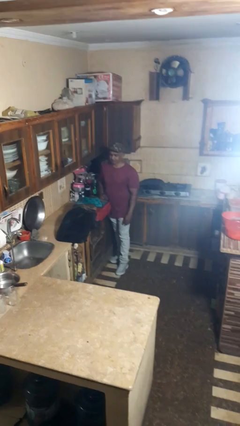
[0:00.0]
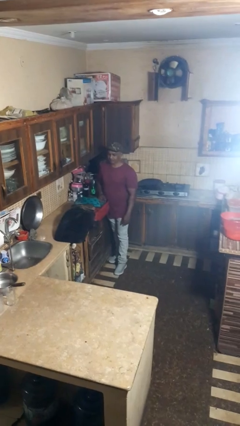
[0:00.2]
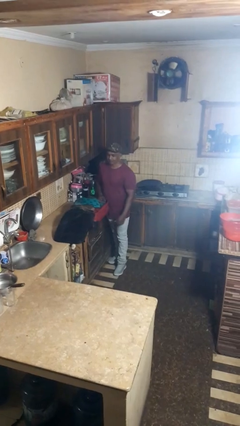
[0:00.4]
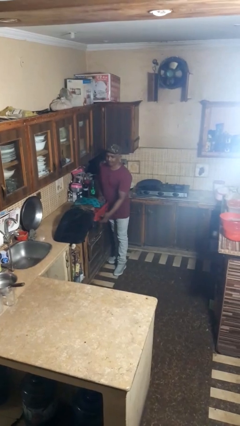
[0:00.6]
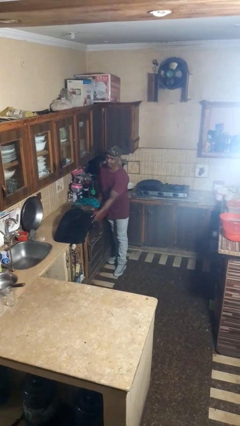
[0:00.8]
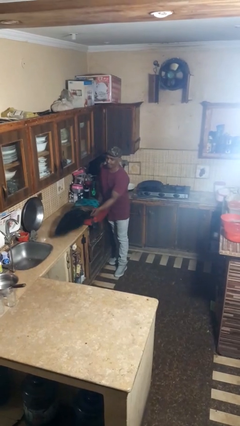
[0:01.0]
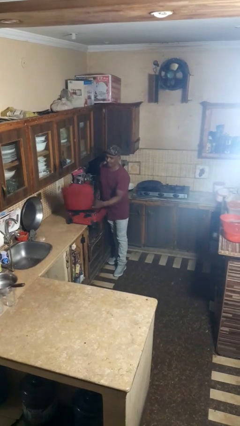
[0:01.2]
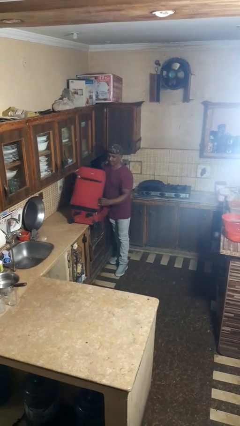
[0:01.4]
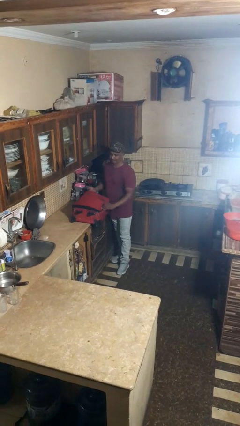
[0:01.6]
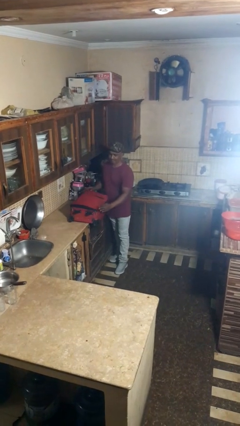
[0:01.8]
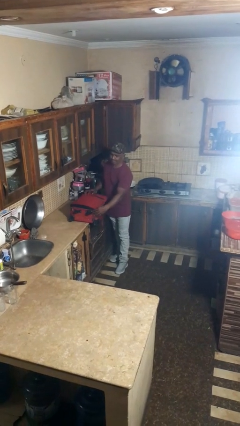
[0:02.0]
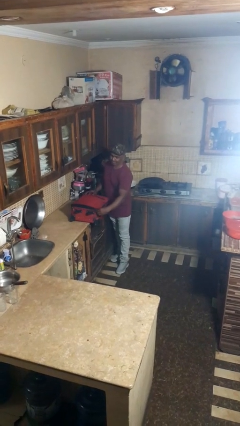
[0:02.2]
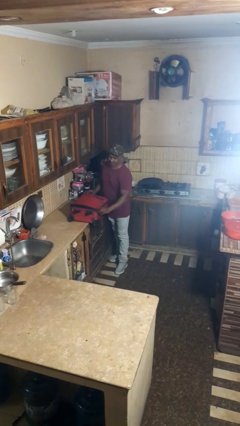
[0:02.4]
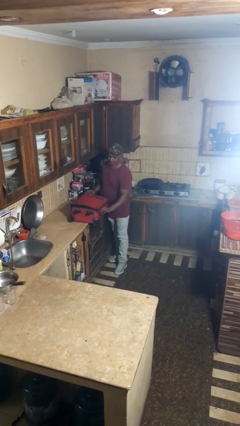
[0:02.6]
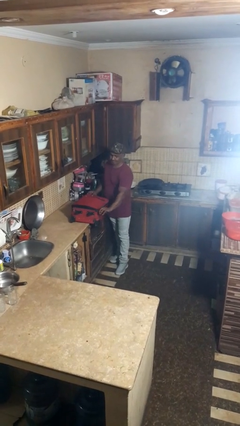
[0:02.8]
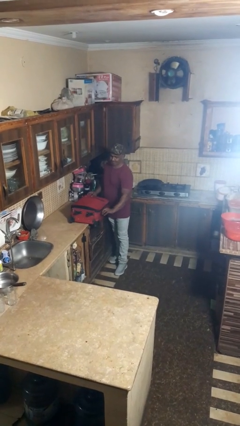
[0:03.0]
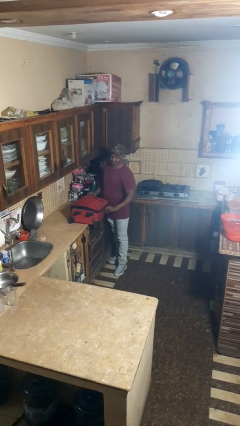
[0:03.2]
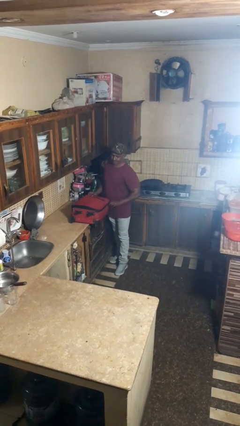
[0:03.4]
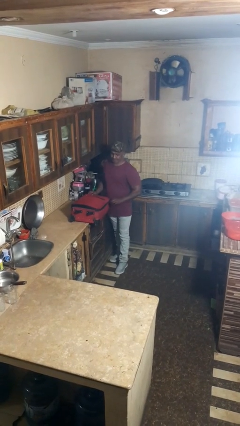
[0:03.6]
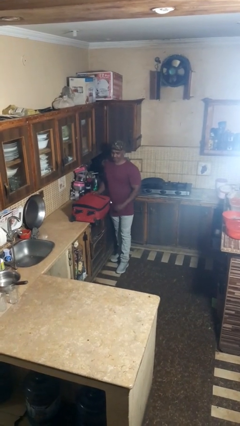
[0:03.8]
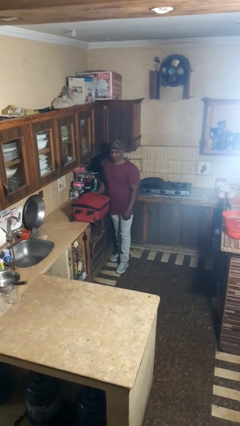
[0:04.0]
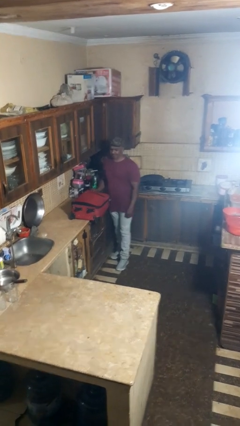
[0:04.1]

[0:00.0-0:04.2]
person closes suitcase

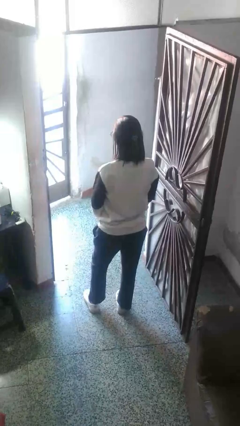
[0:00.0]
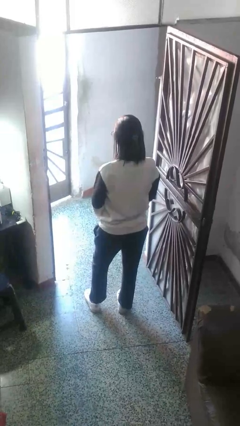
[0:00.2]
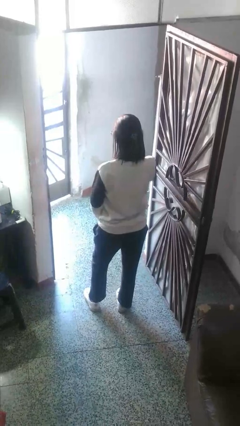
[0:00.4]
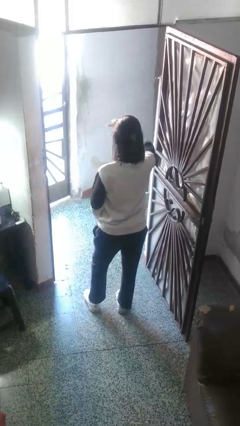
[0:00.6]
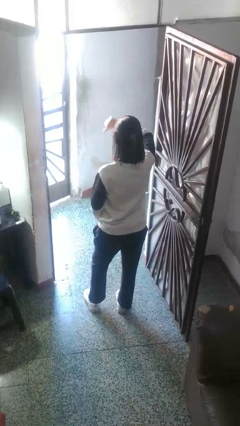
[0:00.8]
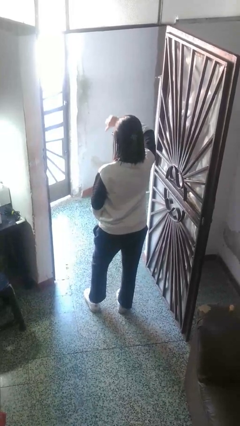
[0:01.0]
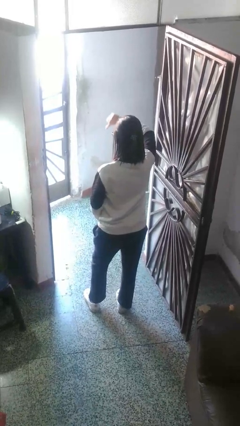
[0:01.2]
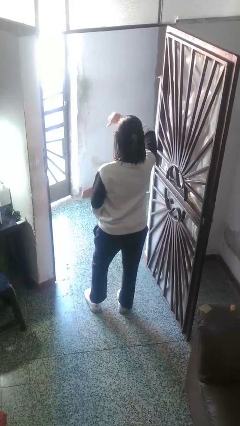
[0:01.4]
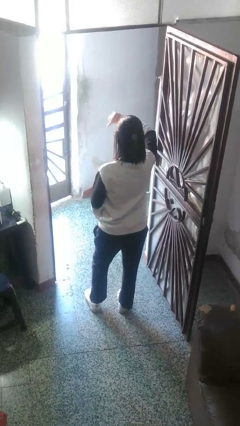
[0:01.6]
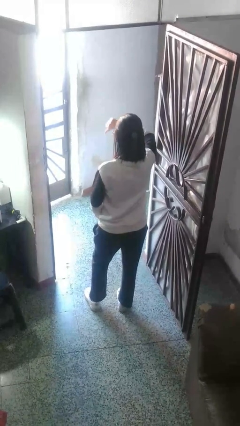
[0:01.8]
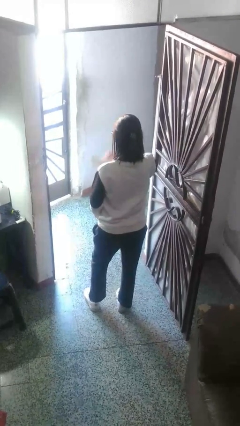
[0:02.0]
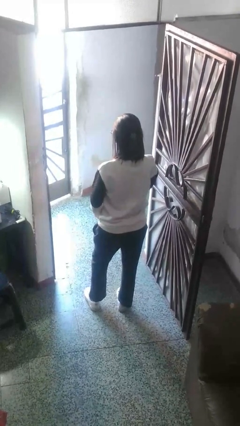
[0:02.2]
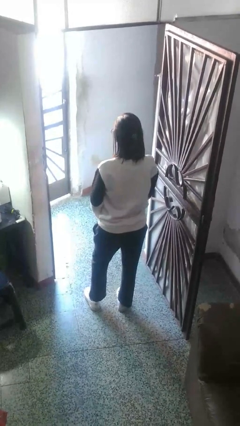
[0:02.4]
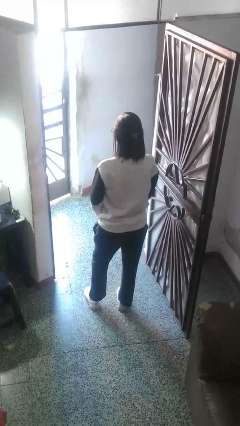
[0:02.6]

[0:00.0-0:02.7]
person gestures thumbs down

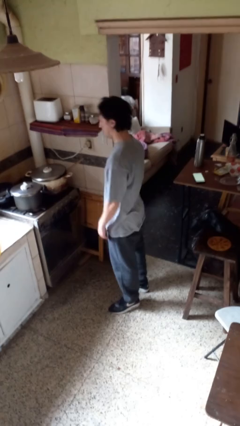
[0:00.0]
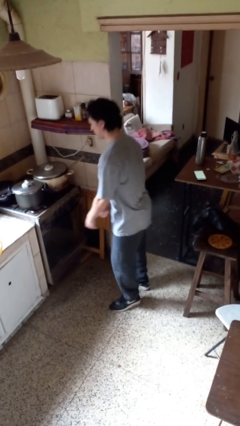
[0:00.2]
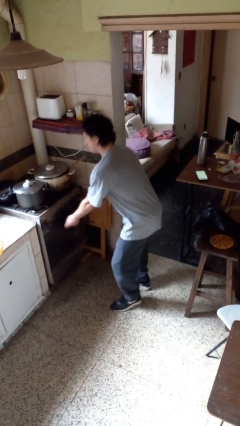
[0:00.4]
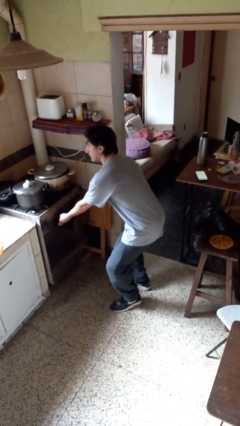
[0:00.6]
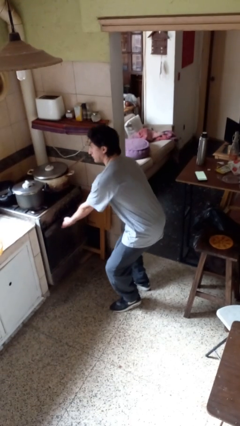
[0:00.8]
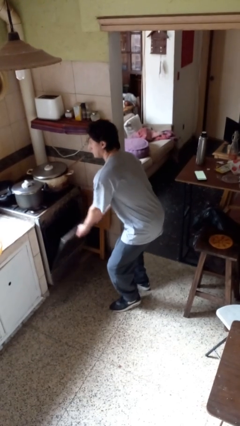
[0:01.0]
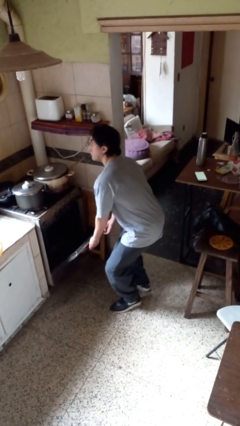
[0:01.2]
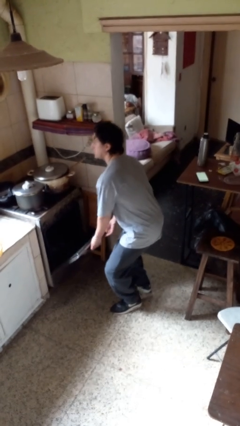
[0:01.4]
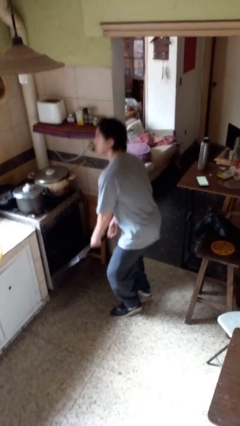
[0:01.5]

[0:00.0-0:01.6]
person opens oven door

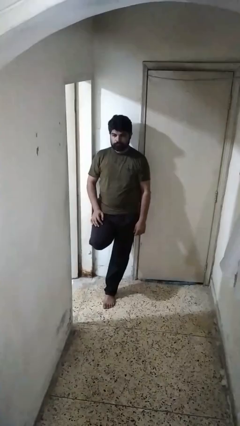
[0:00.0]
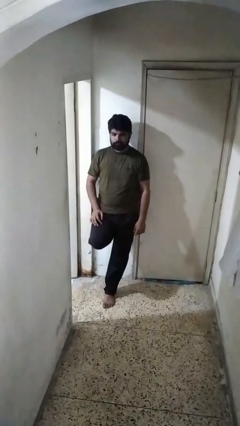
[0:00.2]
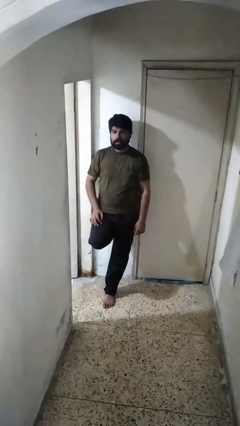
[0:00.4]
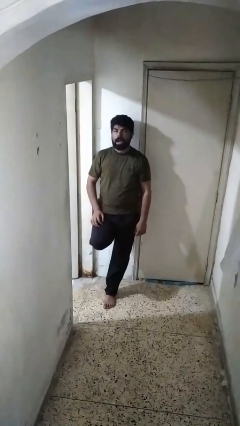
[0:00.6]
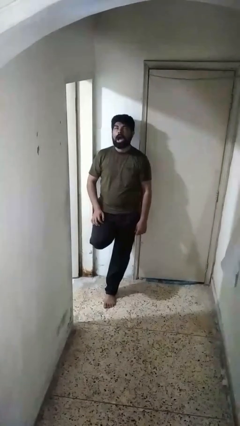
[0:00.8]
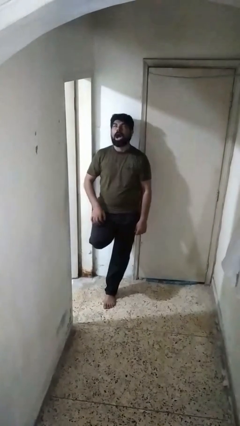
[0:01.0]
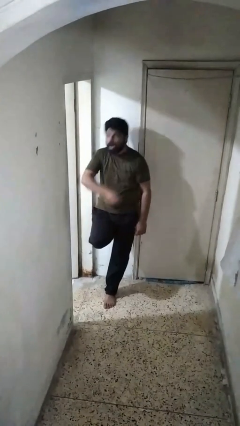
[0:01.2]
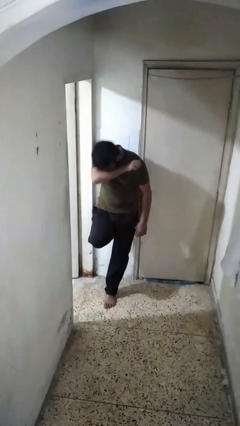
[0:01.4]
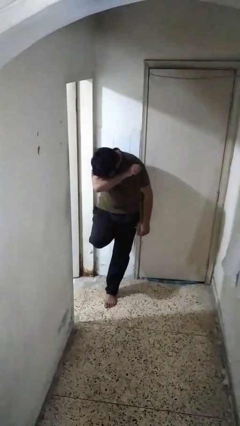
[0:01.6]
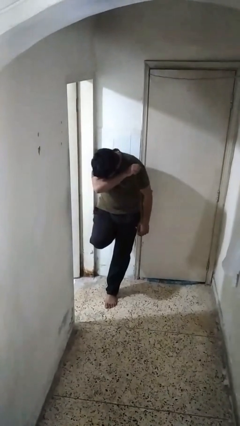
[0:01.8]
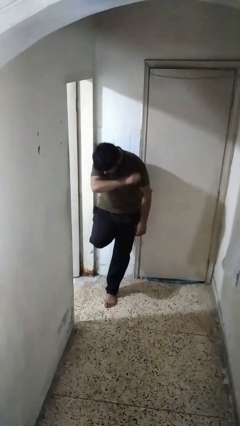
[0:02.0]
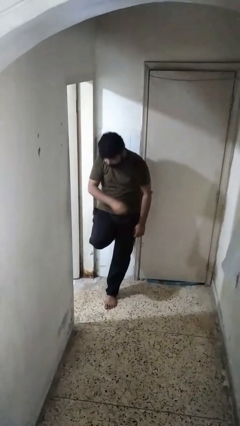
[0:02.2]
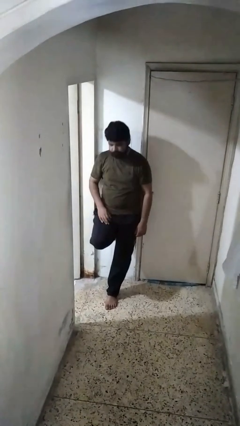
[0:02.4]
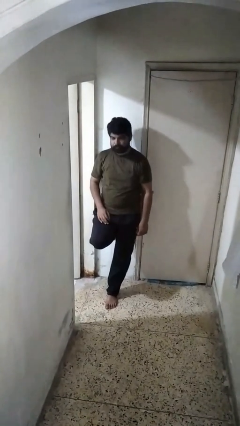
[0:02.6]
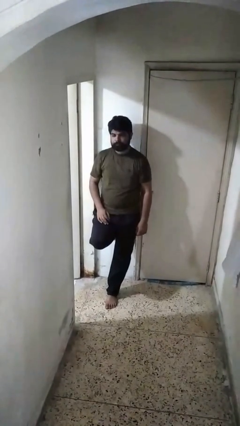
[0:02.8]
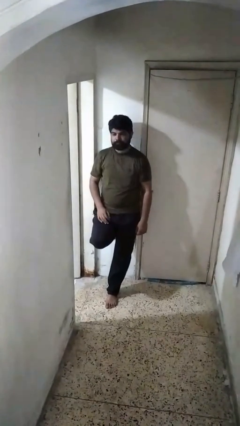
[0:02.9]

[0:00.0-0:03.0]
person sneezes into arm

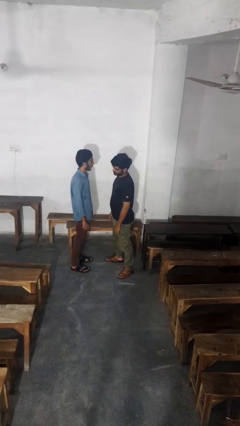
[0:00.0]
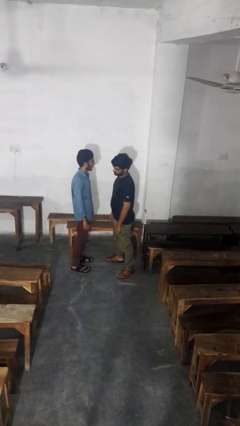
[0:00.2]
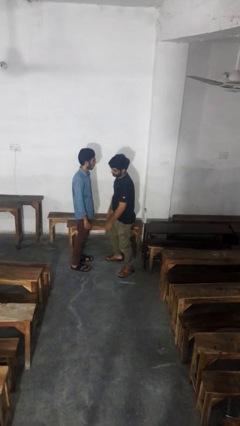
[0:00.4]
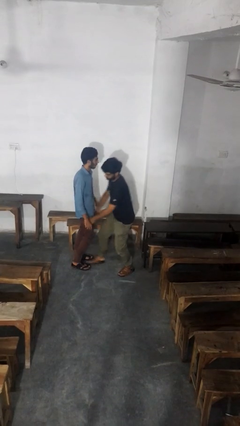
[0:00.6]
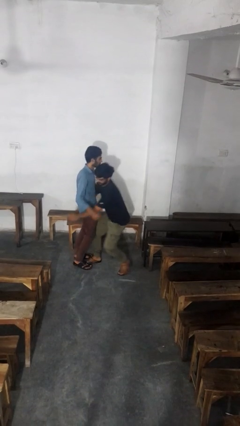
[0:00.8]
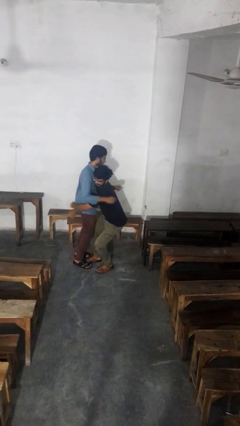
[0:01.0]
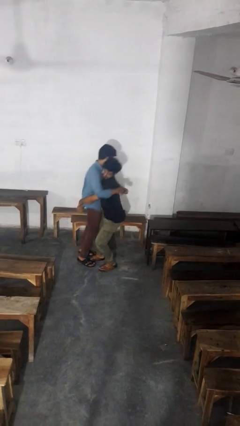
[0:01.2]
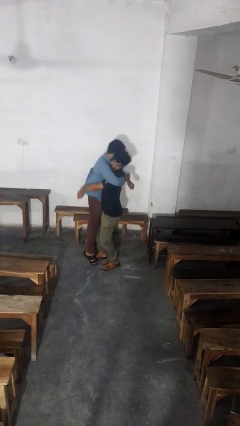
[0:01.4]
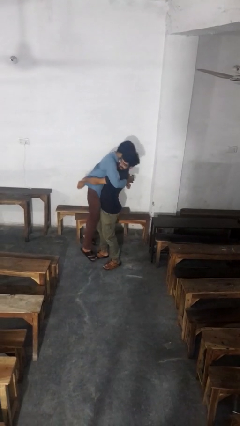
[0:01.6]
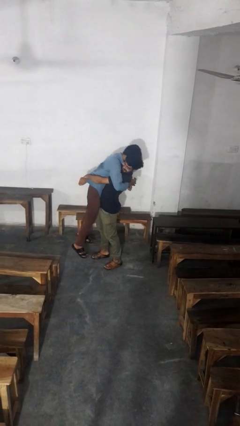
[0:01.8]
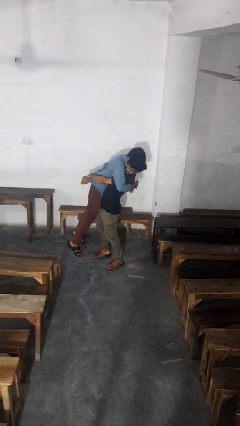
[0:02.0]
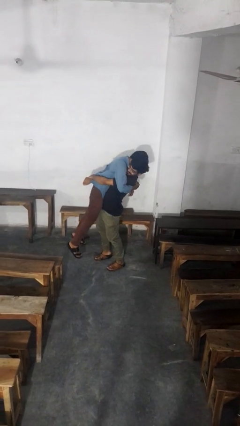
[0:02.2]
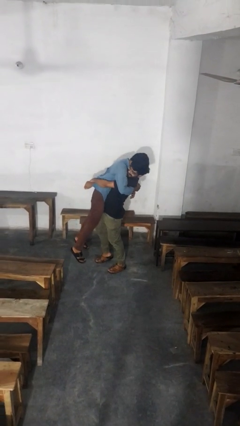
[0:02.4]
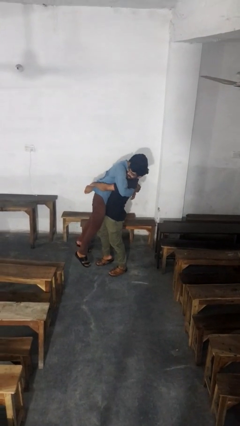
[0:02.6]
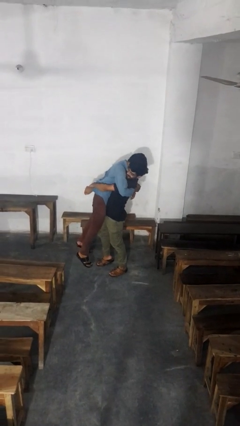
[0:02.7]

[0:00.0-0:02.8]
person picks up person

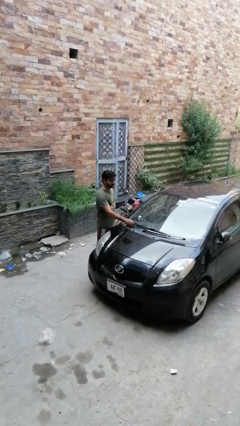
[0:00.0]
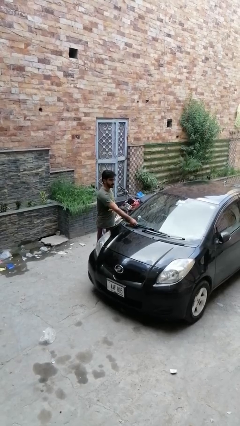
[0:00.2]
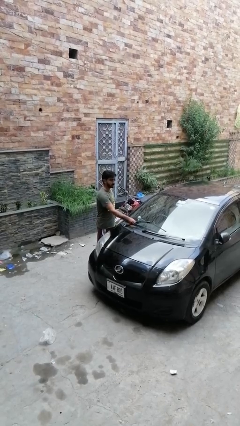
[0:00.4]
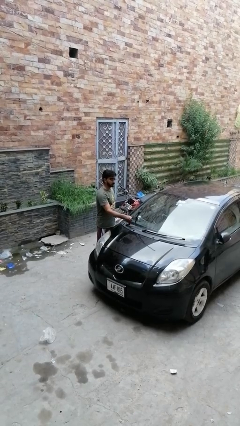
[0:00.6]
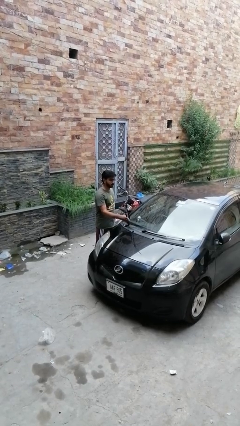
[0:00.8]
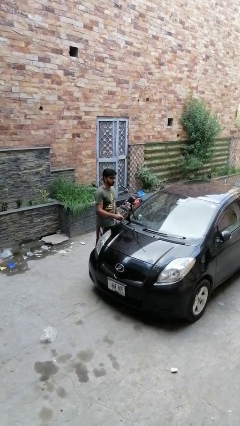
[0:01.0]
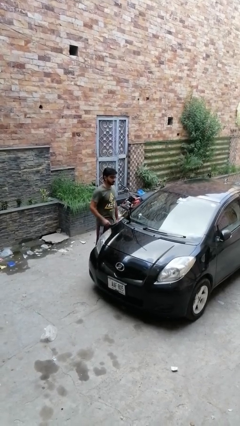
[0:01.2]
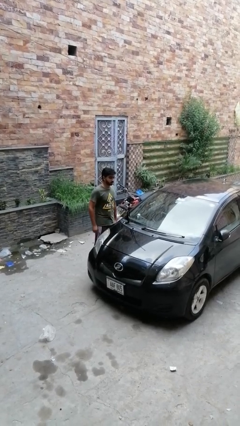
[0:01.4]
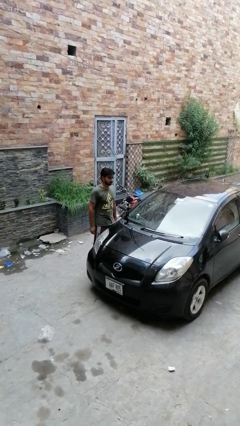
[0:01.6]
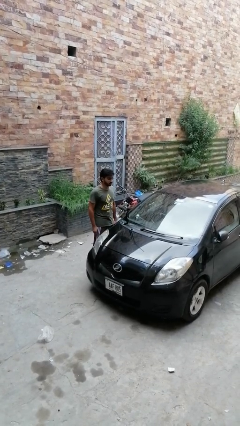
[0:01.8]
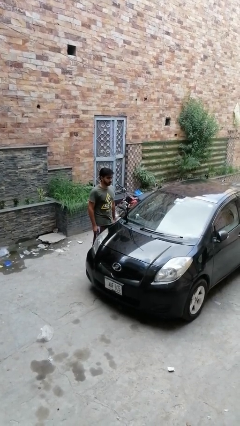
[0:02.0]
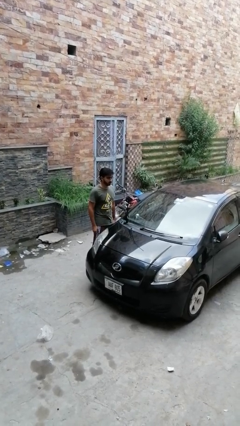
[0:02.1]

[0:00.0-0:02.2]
person flips up car wipers

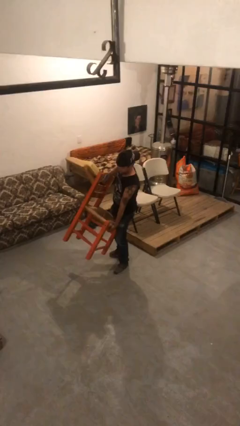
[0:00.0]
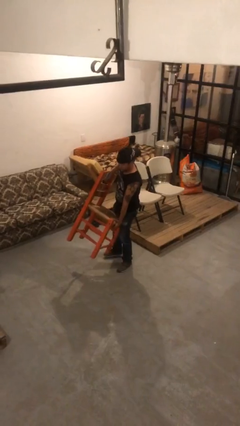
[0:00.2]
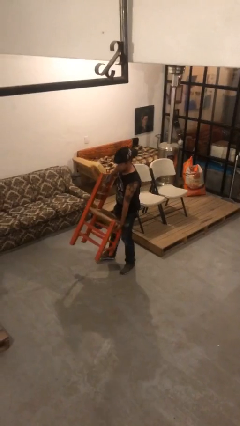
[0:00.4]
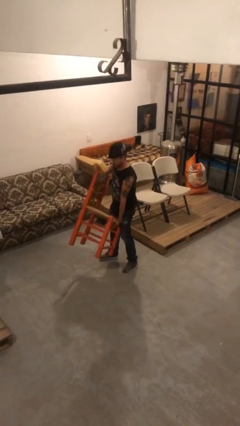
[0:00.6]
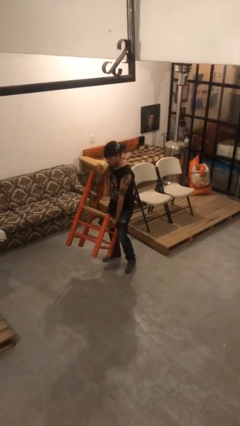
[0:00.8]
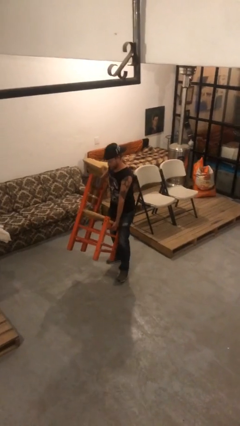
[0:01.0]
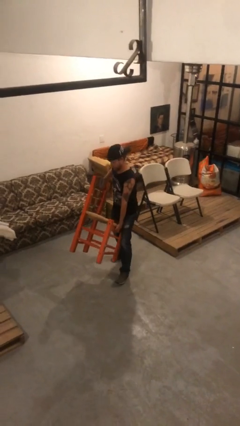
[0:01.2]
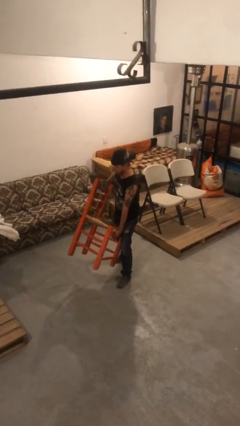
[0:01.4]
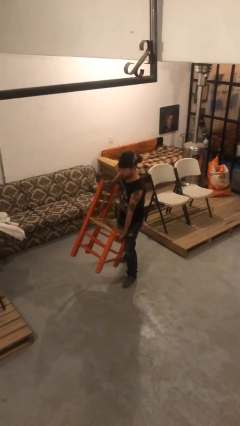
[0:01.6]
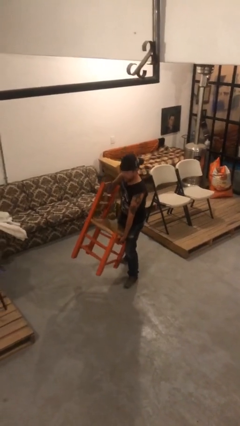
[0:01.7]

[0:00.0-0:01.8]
person carries heavy object
